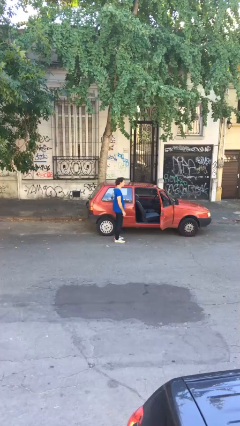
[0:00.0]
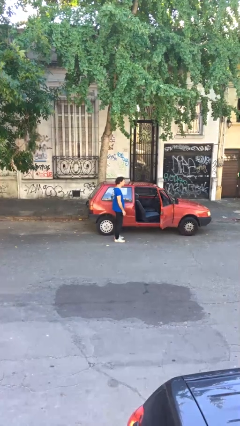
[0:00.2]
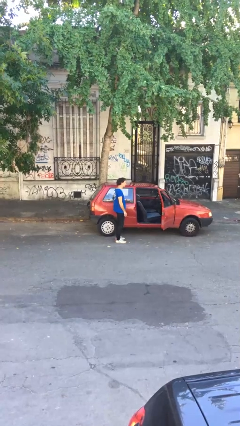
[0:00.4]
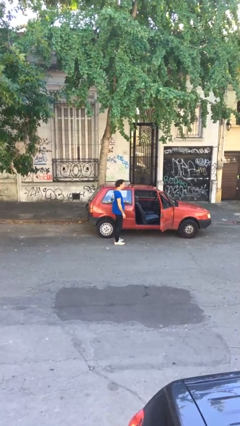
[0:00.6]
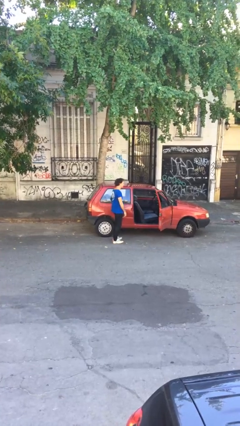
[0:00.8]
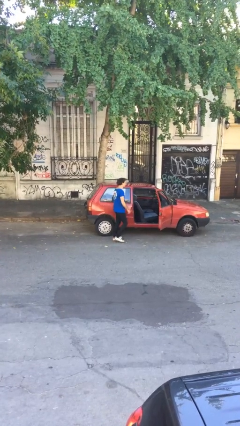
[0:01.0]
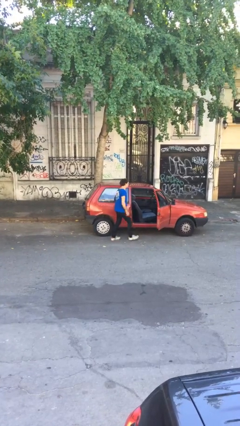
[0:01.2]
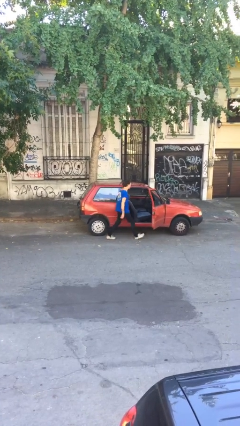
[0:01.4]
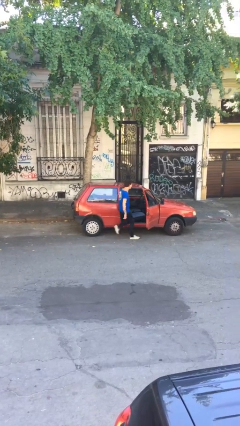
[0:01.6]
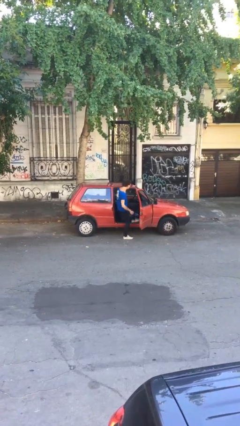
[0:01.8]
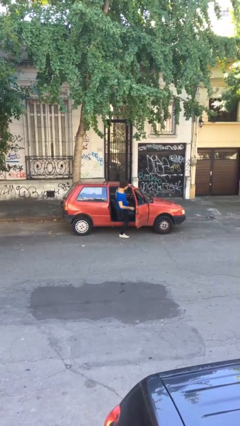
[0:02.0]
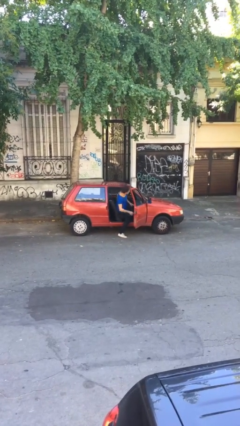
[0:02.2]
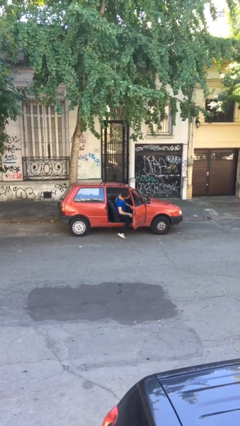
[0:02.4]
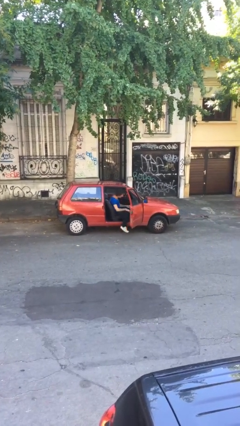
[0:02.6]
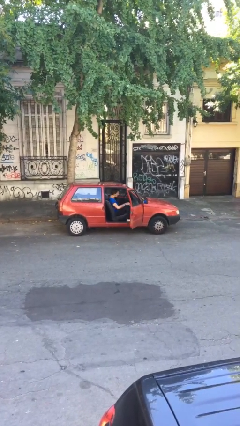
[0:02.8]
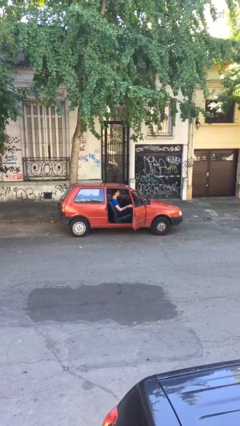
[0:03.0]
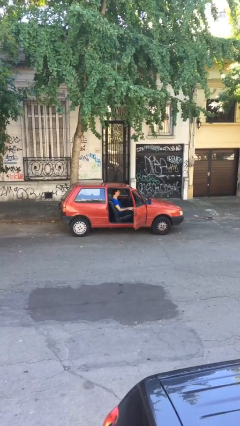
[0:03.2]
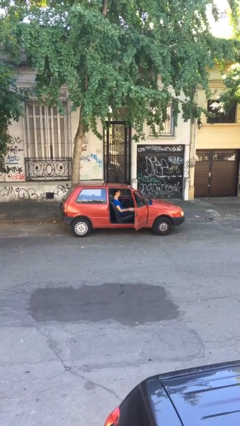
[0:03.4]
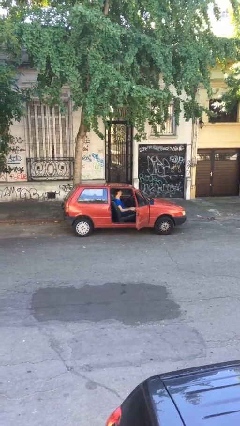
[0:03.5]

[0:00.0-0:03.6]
person enters car

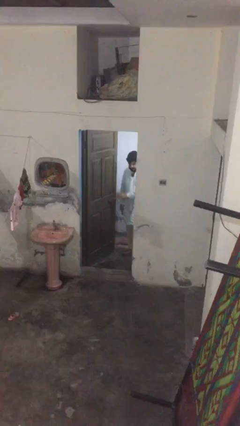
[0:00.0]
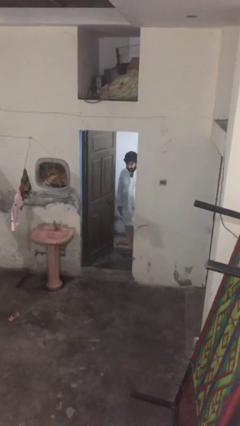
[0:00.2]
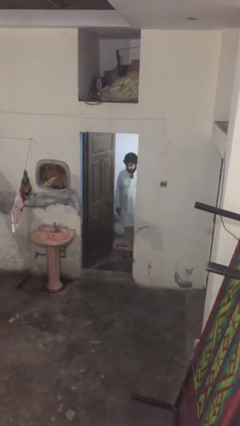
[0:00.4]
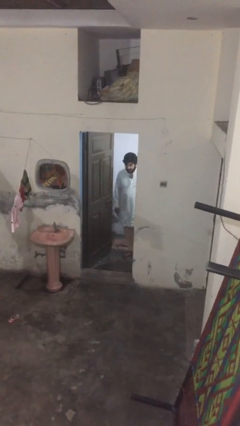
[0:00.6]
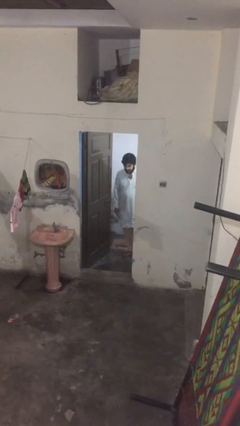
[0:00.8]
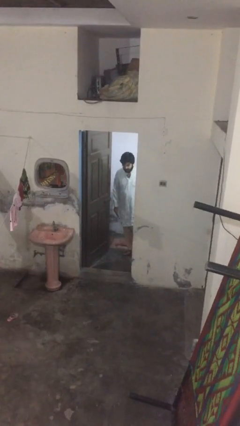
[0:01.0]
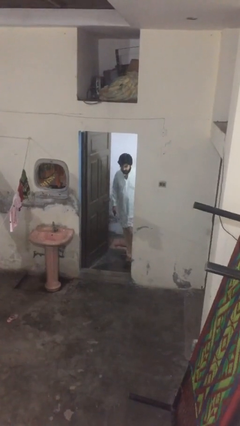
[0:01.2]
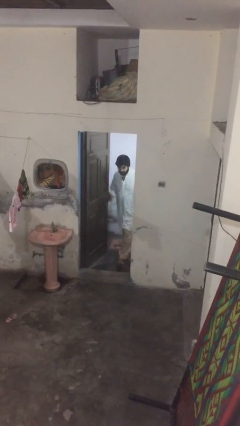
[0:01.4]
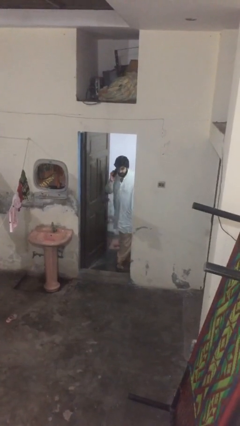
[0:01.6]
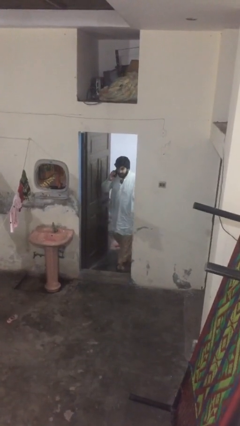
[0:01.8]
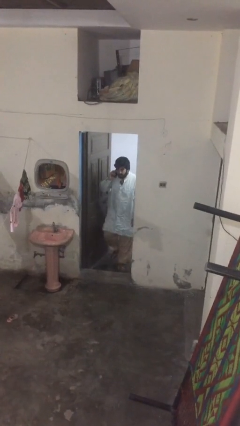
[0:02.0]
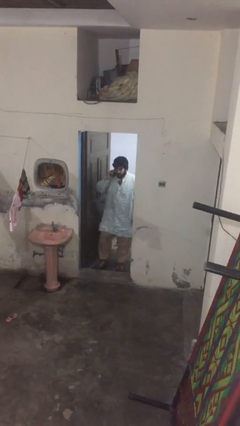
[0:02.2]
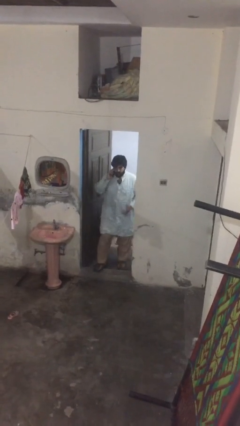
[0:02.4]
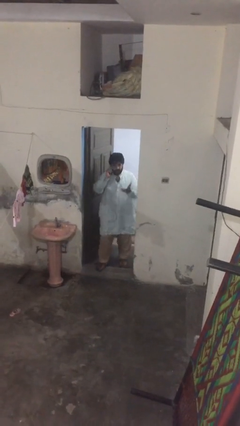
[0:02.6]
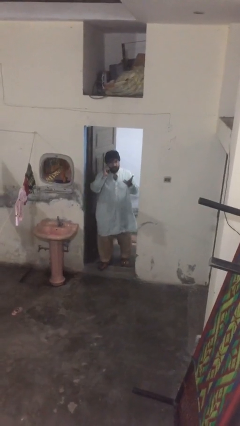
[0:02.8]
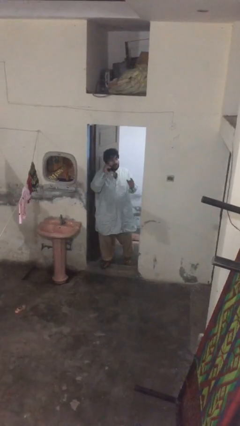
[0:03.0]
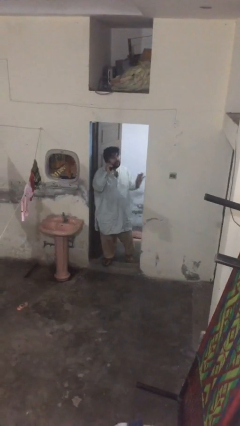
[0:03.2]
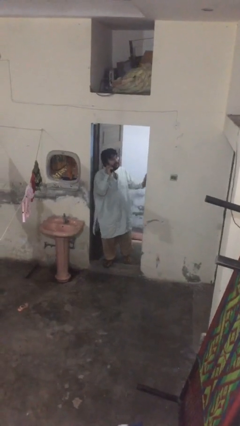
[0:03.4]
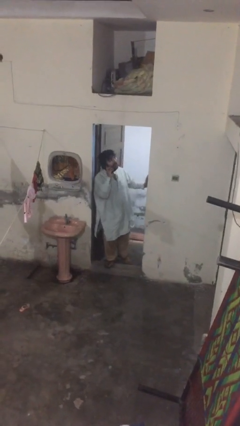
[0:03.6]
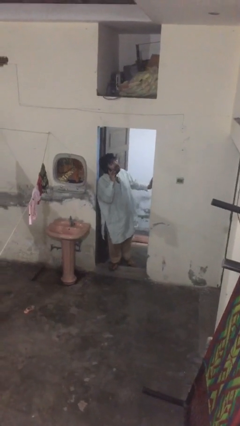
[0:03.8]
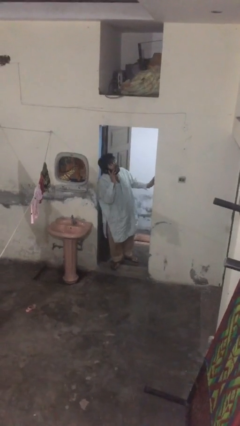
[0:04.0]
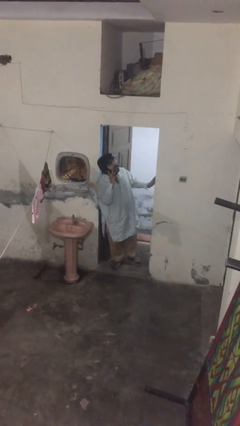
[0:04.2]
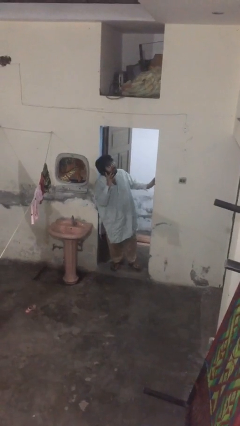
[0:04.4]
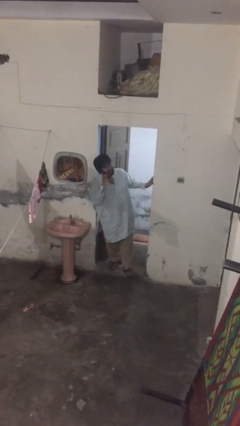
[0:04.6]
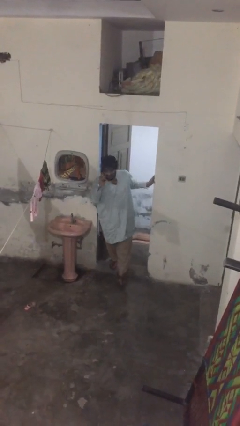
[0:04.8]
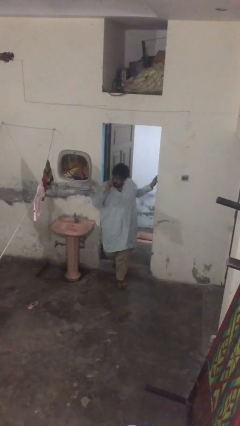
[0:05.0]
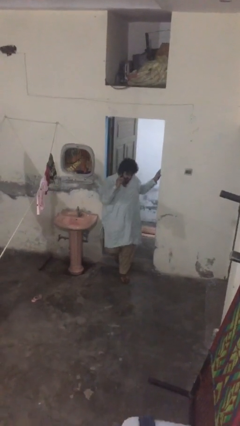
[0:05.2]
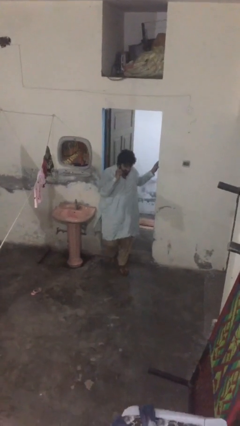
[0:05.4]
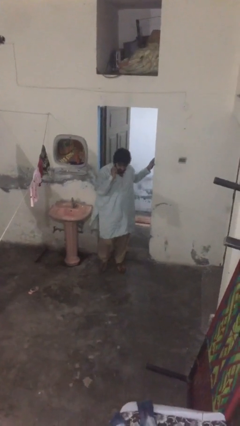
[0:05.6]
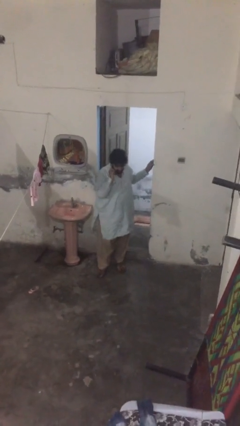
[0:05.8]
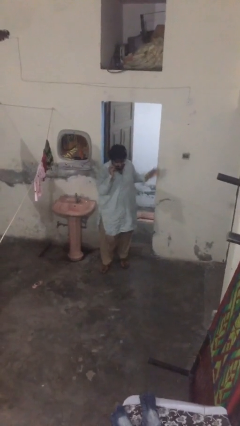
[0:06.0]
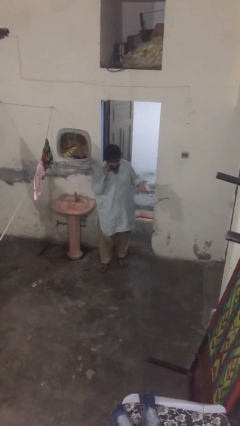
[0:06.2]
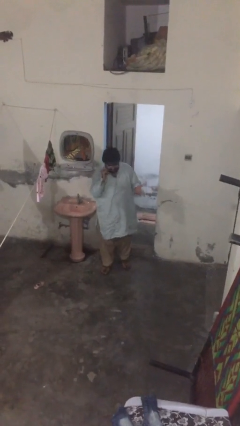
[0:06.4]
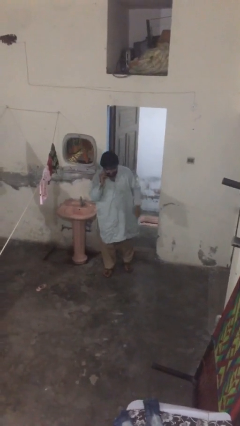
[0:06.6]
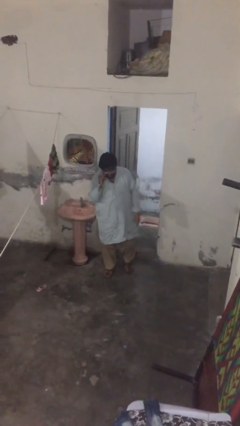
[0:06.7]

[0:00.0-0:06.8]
person enters scene through structure

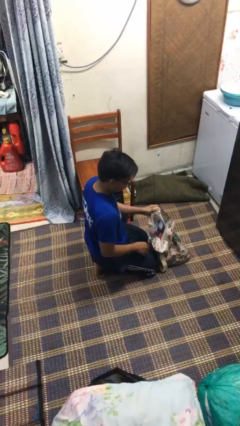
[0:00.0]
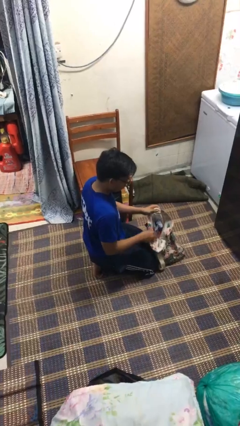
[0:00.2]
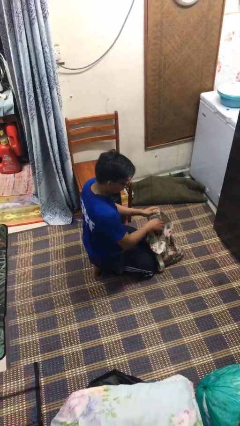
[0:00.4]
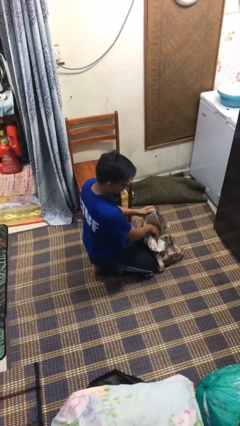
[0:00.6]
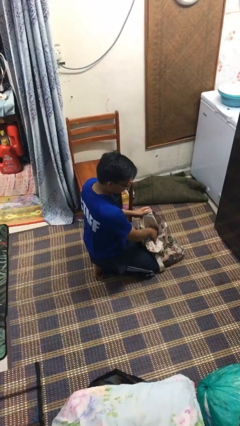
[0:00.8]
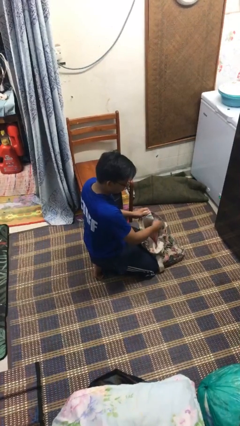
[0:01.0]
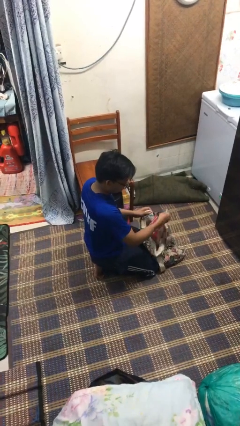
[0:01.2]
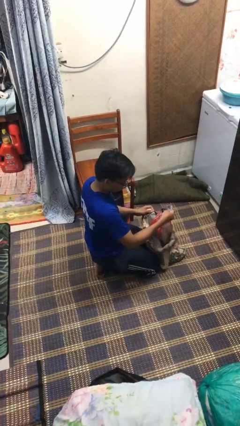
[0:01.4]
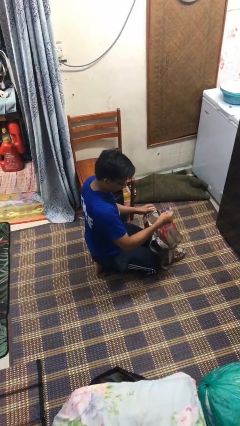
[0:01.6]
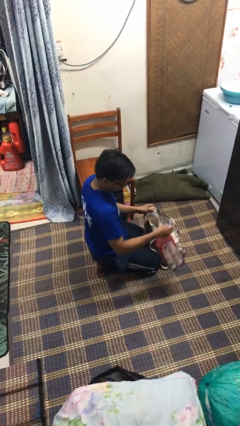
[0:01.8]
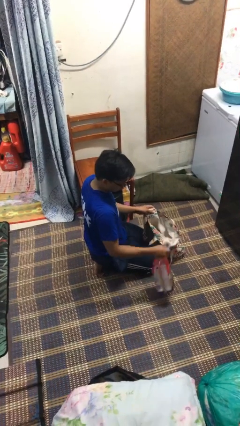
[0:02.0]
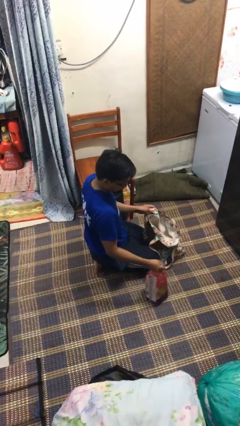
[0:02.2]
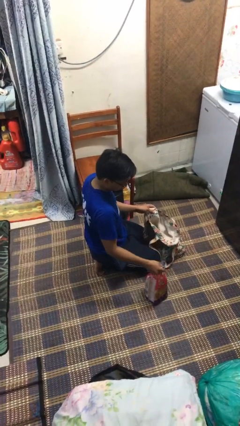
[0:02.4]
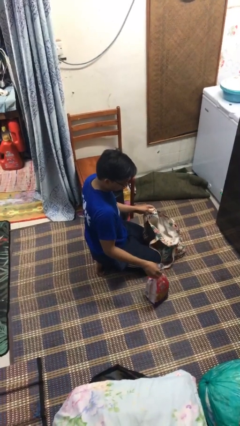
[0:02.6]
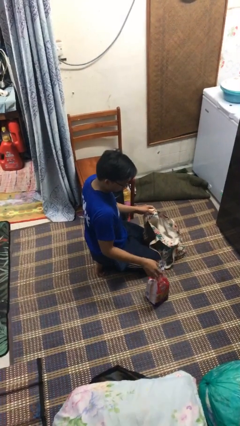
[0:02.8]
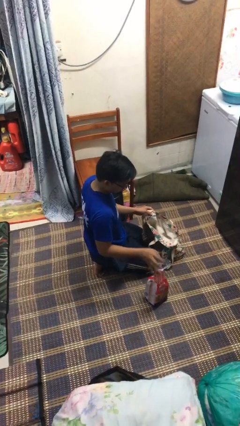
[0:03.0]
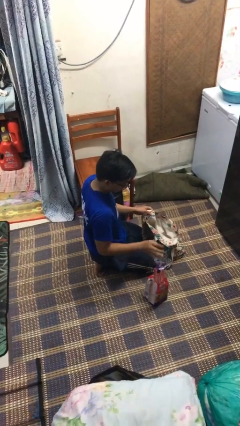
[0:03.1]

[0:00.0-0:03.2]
person takes object from bag

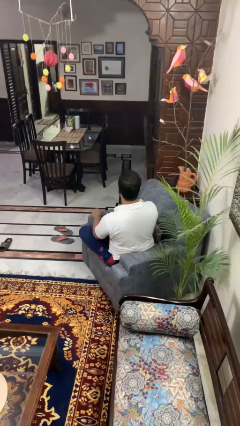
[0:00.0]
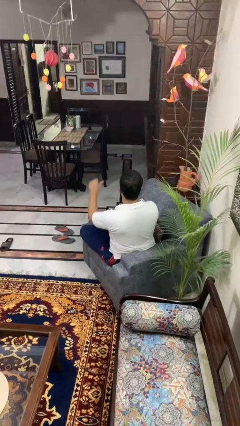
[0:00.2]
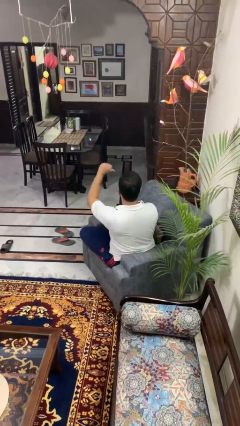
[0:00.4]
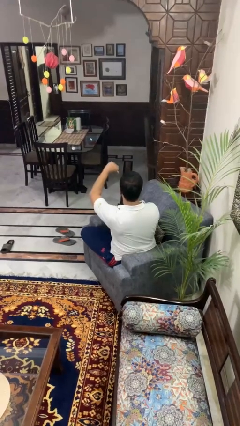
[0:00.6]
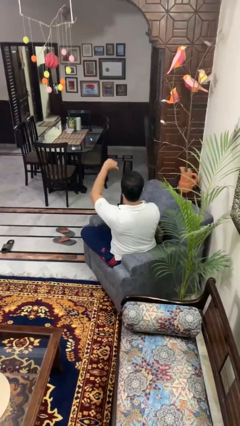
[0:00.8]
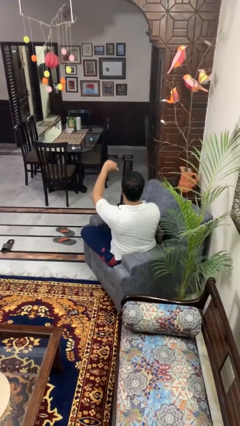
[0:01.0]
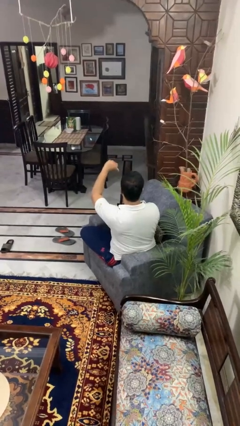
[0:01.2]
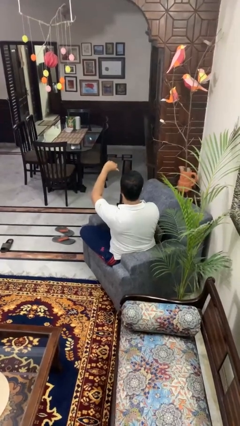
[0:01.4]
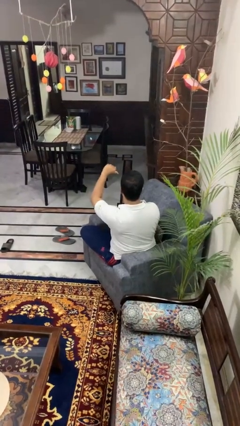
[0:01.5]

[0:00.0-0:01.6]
person gestures thumbs down

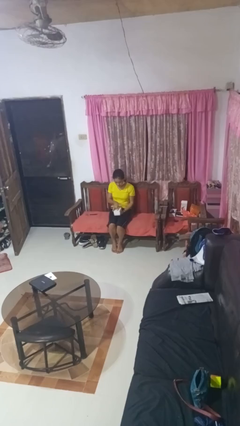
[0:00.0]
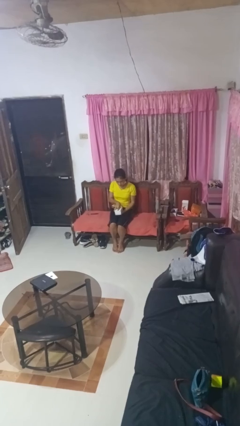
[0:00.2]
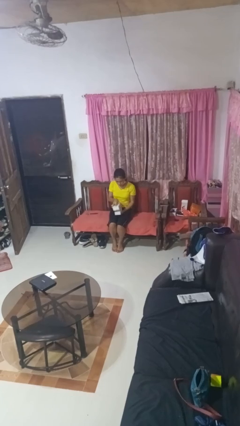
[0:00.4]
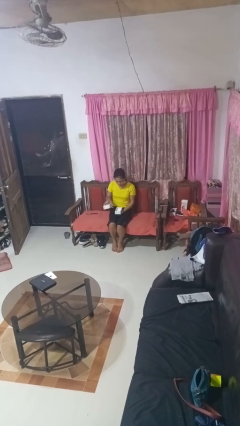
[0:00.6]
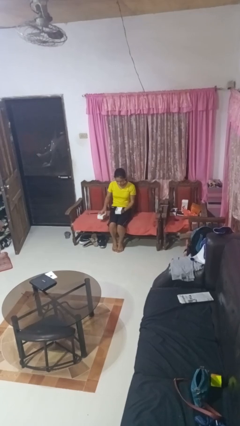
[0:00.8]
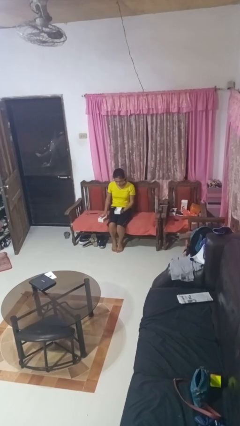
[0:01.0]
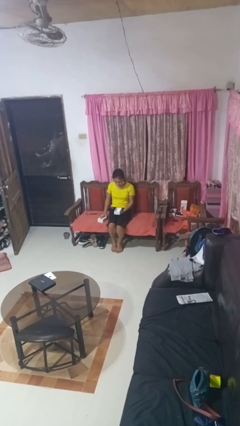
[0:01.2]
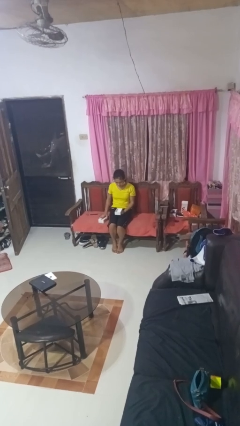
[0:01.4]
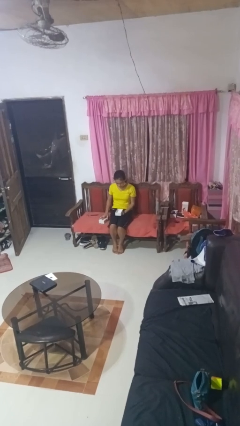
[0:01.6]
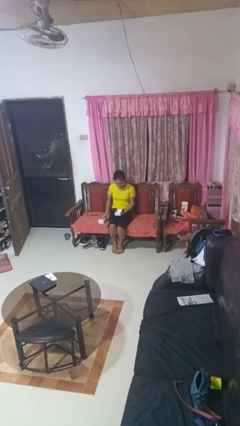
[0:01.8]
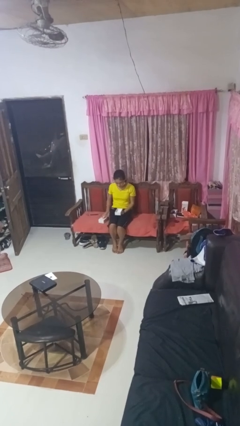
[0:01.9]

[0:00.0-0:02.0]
person opens jewelry box

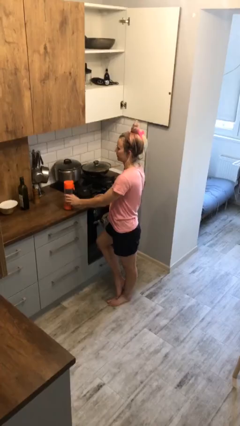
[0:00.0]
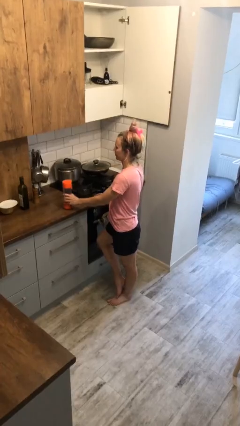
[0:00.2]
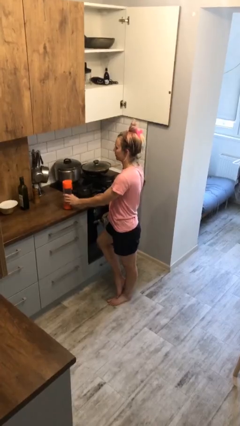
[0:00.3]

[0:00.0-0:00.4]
person puts down object on countertop
